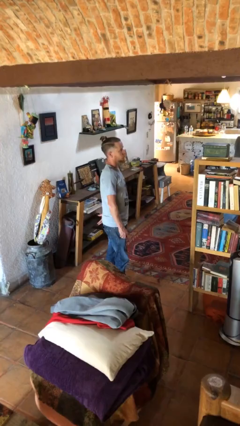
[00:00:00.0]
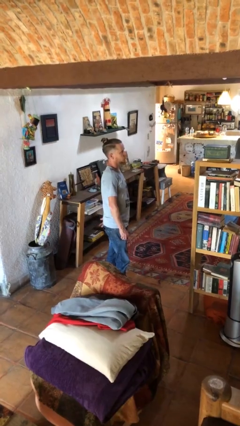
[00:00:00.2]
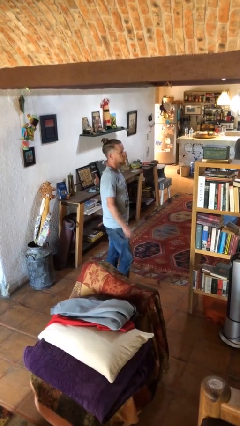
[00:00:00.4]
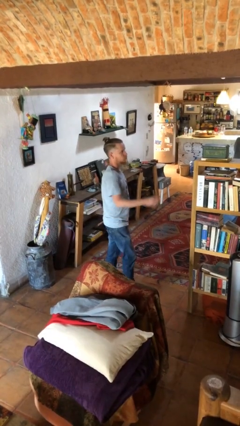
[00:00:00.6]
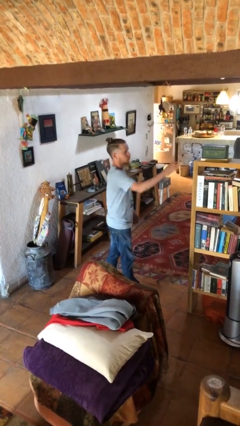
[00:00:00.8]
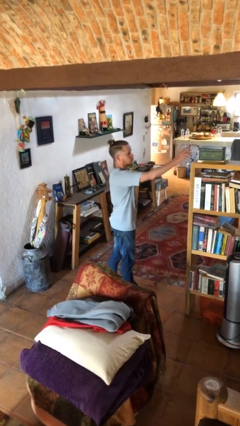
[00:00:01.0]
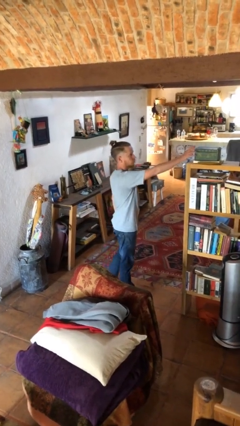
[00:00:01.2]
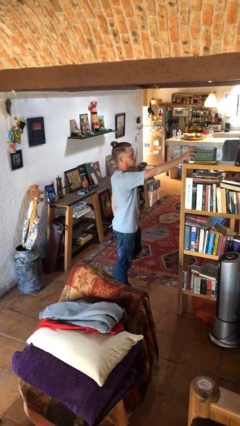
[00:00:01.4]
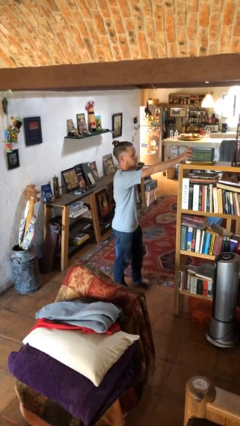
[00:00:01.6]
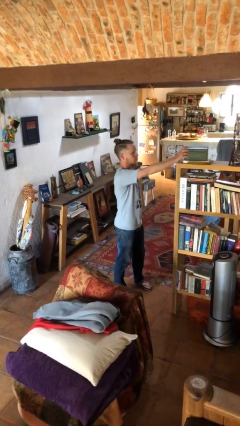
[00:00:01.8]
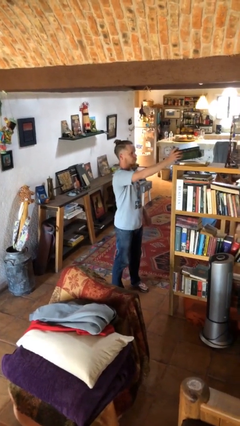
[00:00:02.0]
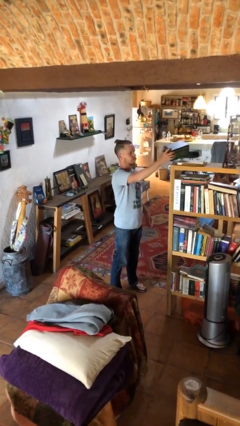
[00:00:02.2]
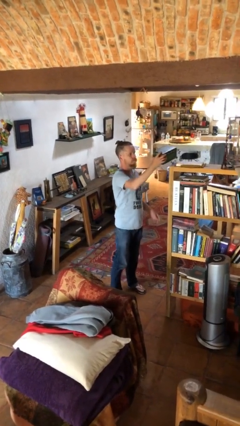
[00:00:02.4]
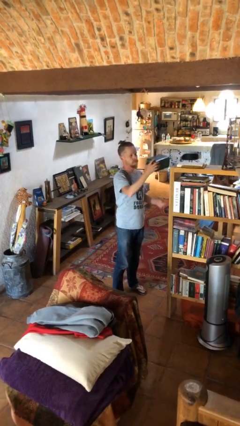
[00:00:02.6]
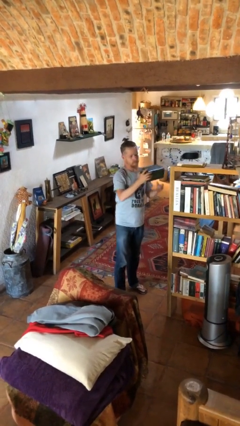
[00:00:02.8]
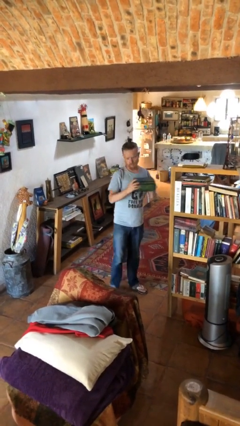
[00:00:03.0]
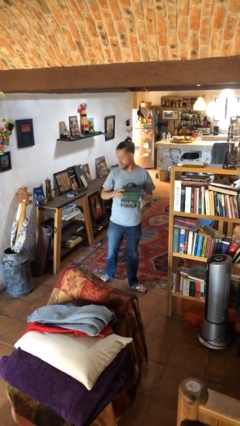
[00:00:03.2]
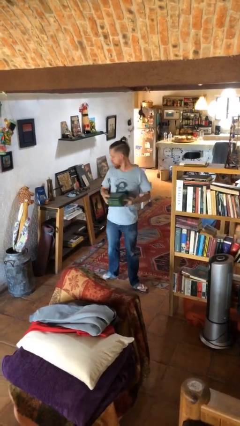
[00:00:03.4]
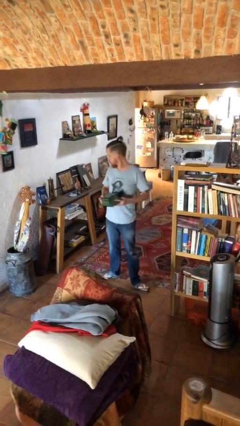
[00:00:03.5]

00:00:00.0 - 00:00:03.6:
person picks up object from shelf

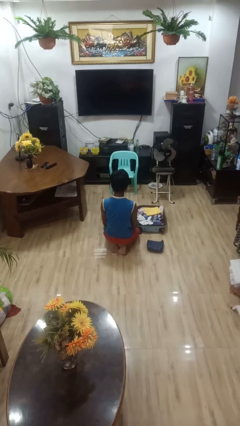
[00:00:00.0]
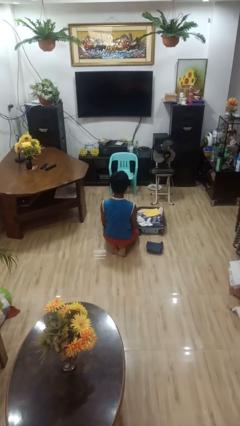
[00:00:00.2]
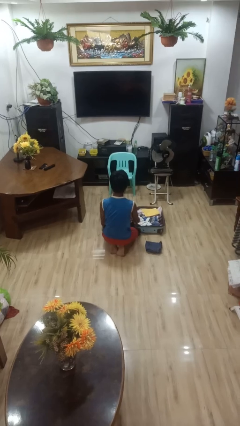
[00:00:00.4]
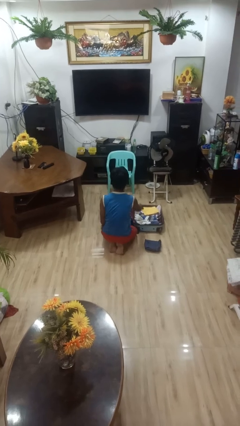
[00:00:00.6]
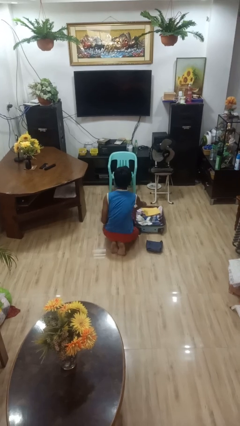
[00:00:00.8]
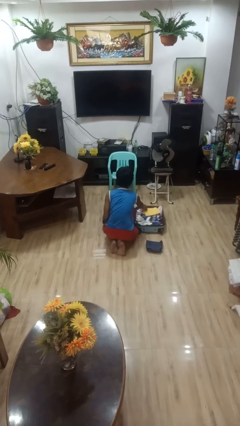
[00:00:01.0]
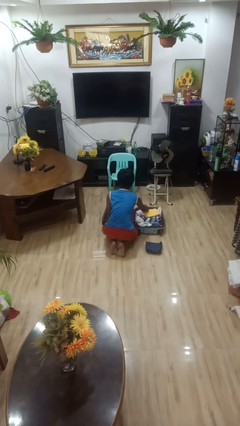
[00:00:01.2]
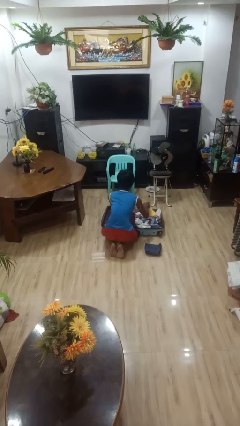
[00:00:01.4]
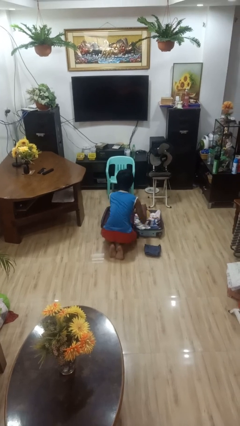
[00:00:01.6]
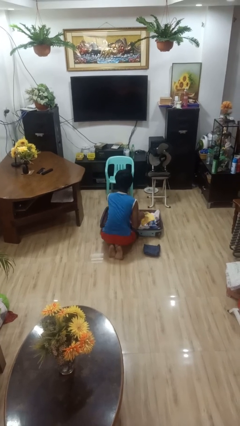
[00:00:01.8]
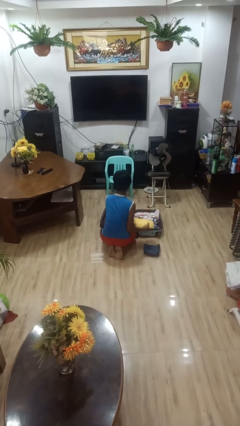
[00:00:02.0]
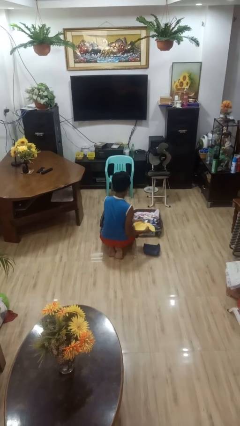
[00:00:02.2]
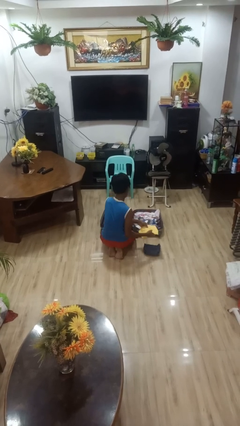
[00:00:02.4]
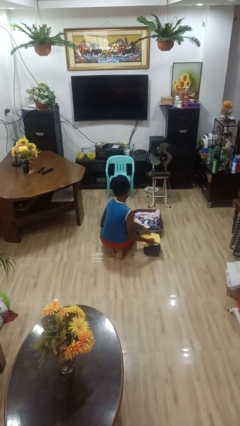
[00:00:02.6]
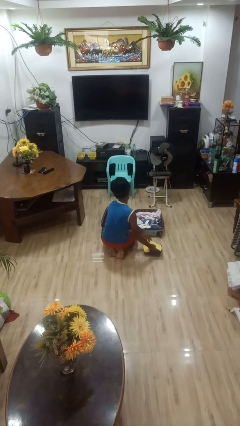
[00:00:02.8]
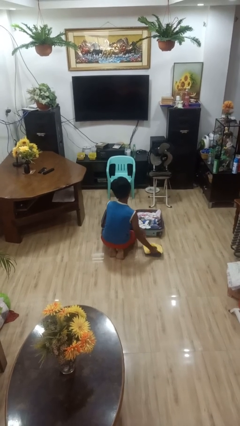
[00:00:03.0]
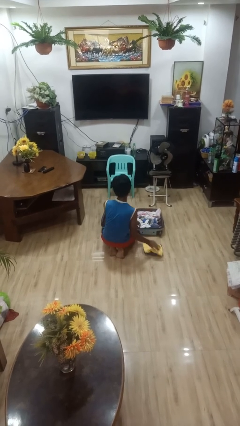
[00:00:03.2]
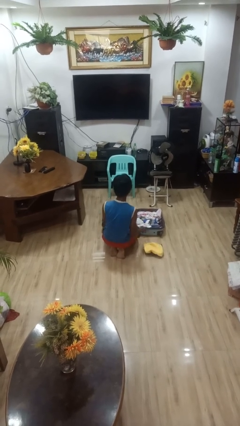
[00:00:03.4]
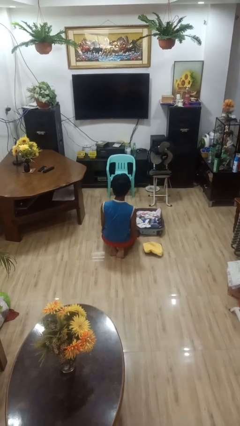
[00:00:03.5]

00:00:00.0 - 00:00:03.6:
person unloads clothes from suitcase

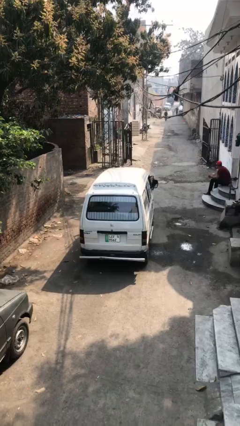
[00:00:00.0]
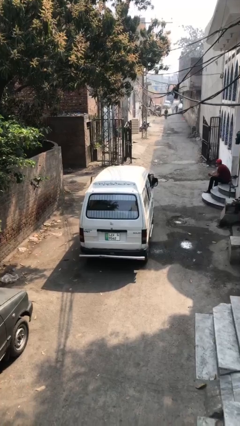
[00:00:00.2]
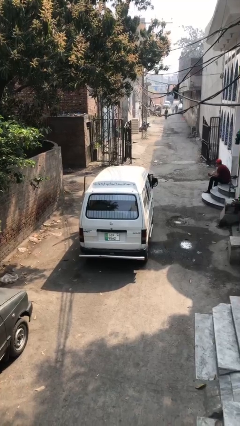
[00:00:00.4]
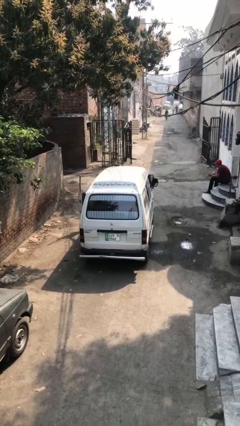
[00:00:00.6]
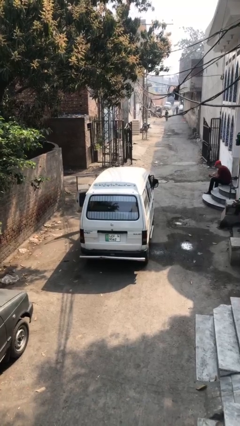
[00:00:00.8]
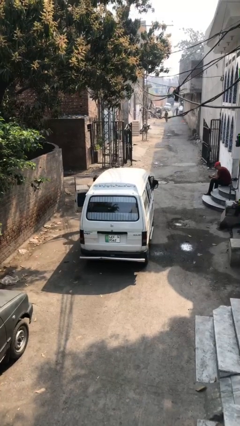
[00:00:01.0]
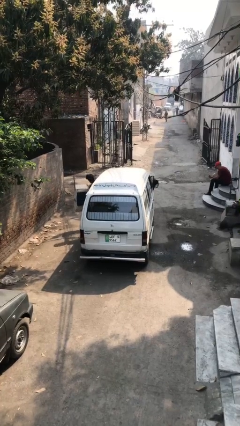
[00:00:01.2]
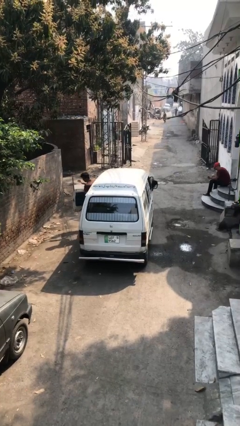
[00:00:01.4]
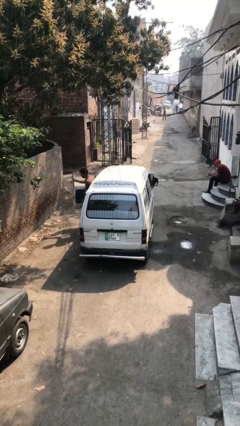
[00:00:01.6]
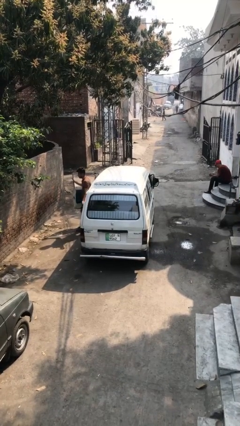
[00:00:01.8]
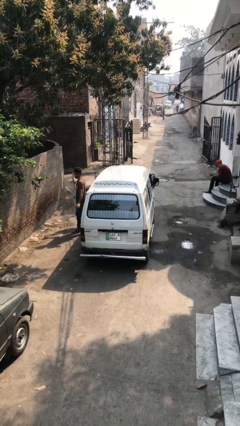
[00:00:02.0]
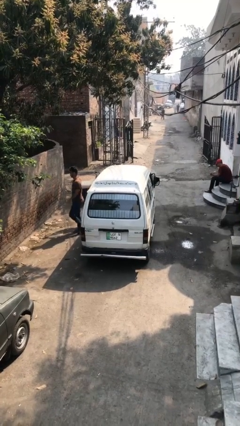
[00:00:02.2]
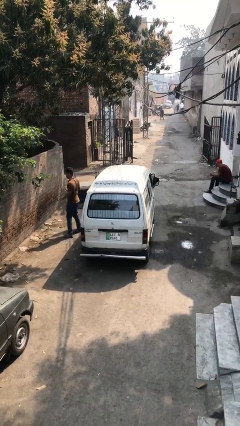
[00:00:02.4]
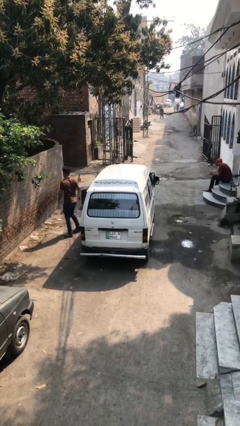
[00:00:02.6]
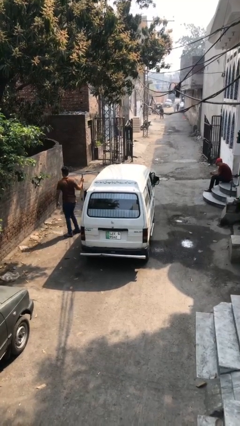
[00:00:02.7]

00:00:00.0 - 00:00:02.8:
car drops off person

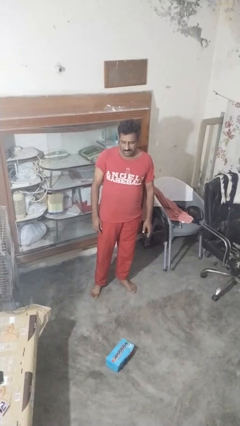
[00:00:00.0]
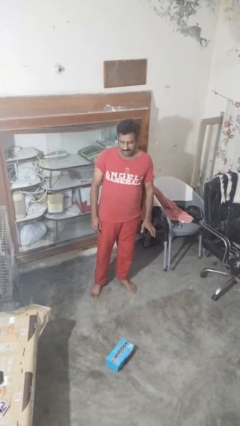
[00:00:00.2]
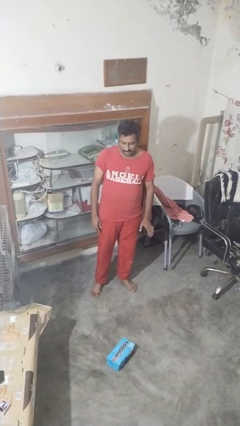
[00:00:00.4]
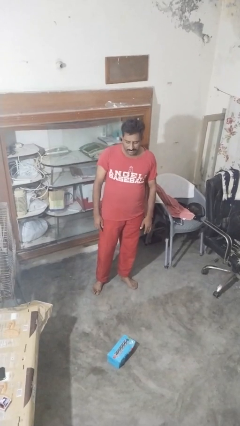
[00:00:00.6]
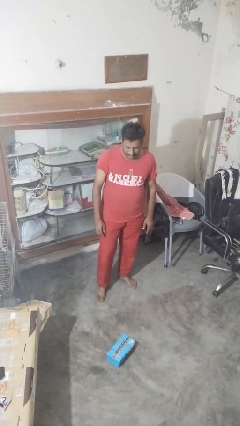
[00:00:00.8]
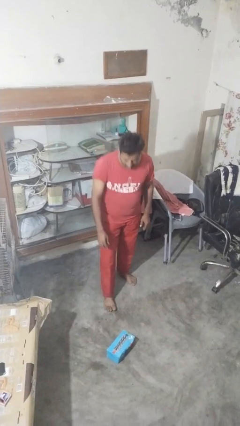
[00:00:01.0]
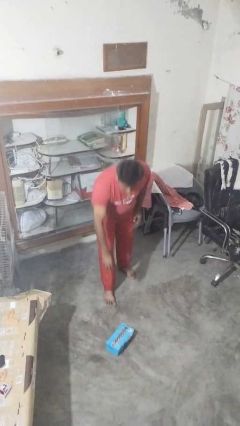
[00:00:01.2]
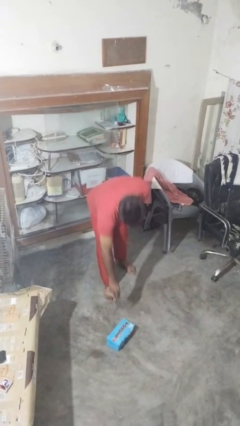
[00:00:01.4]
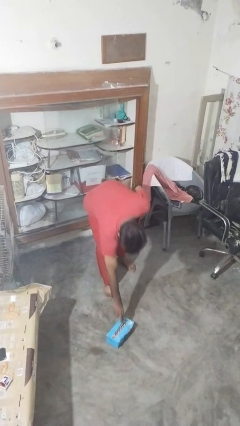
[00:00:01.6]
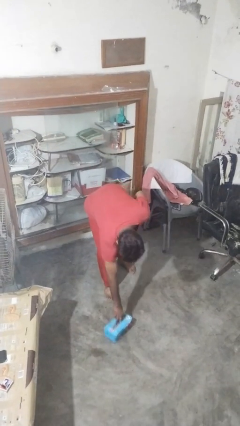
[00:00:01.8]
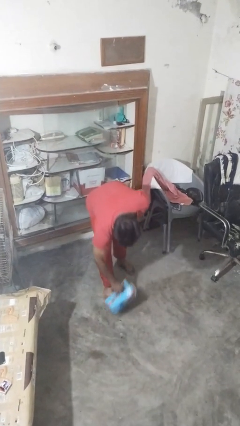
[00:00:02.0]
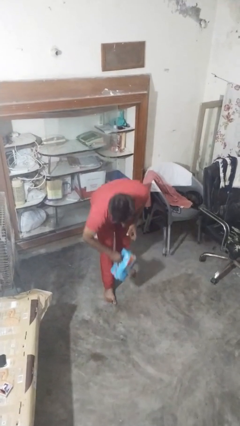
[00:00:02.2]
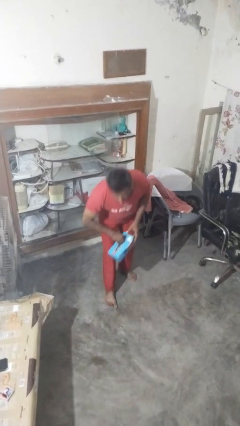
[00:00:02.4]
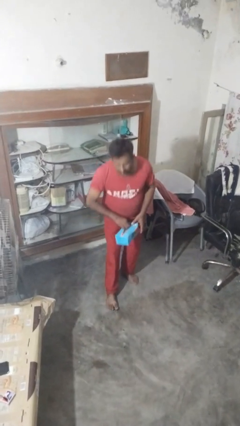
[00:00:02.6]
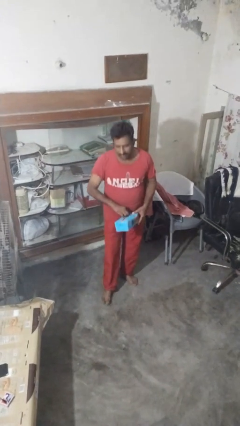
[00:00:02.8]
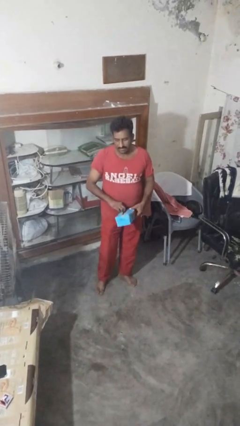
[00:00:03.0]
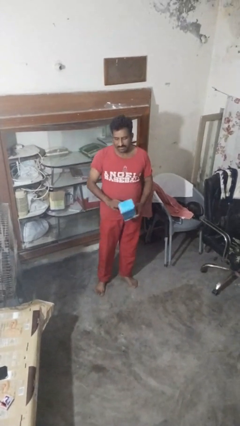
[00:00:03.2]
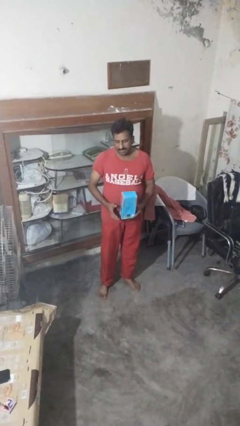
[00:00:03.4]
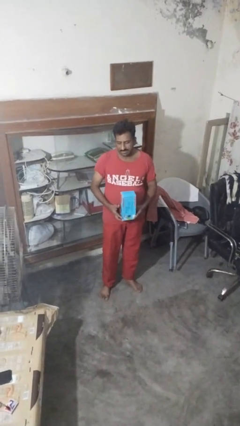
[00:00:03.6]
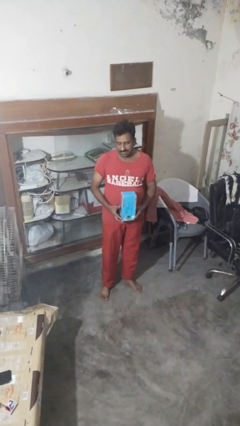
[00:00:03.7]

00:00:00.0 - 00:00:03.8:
person picks up object from floor

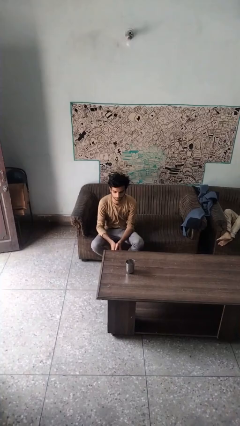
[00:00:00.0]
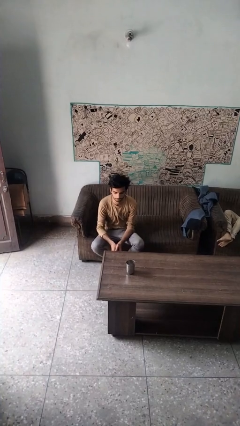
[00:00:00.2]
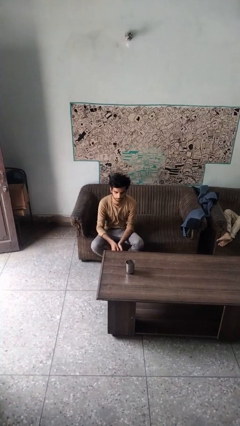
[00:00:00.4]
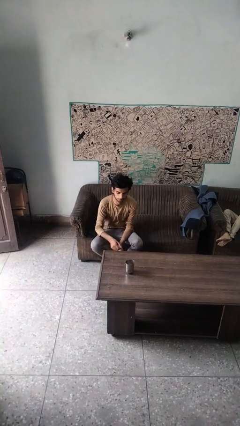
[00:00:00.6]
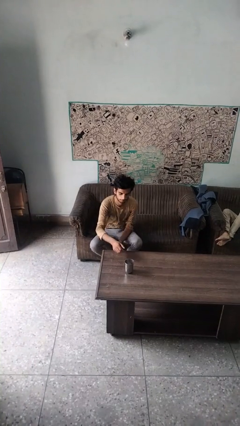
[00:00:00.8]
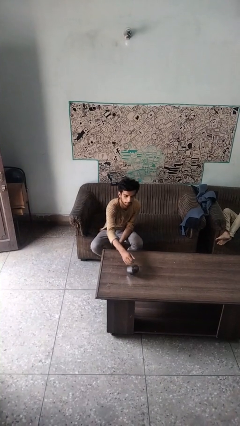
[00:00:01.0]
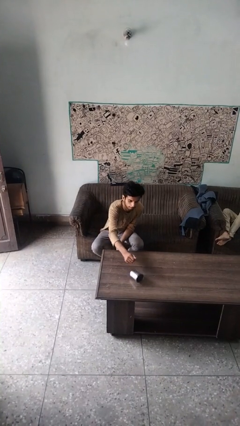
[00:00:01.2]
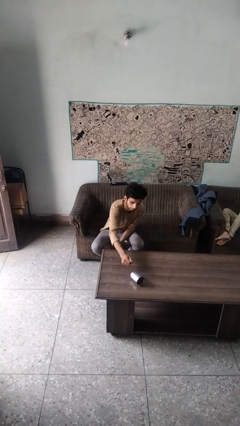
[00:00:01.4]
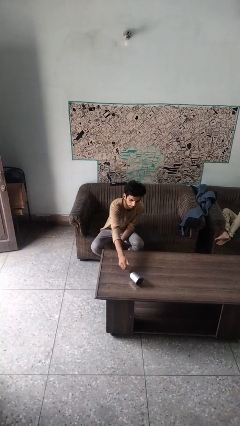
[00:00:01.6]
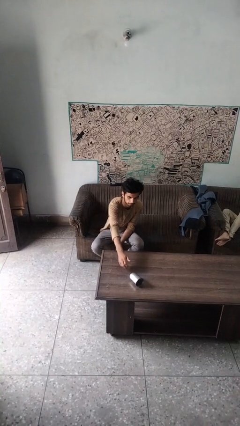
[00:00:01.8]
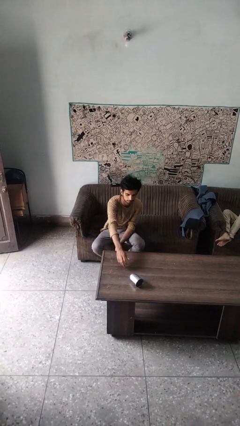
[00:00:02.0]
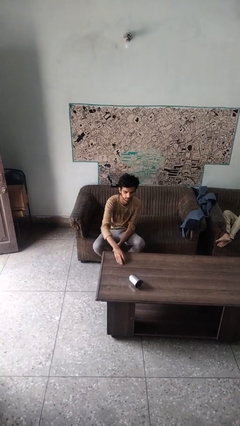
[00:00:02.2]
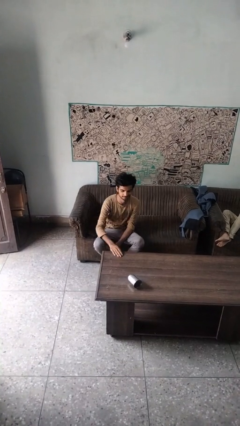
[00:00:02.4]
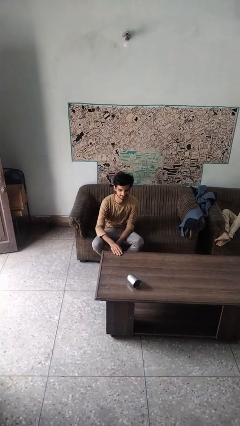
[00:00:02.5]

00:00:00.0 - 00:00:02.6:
person knocks over glass

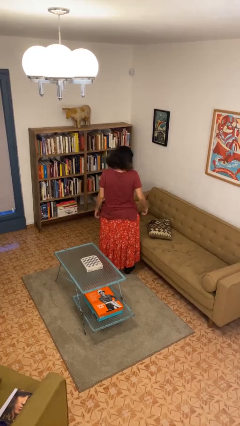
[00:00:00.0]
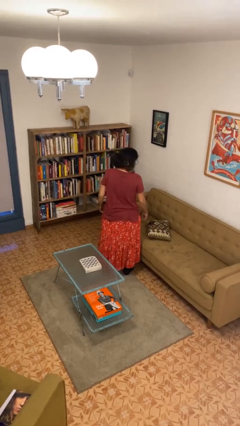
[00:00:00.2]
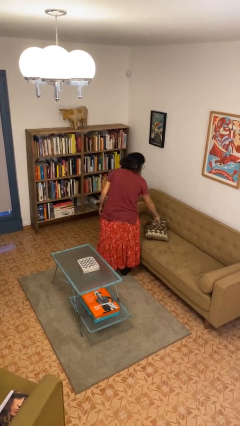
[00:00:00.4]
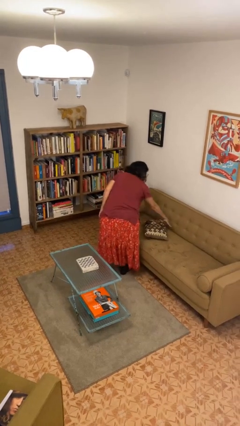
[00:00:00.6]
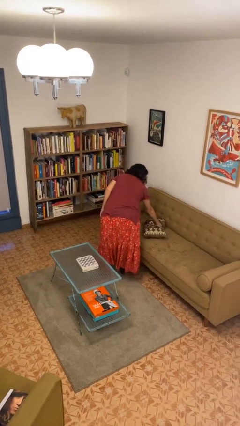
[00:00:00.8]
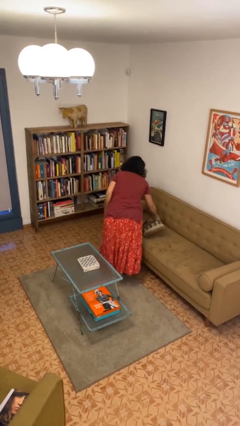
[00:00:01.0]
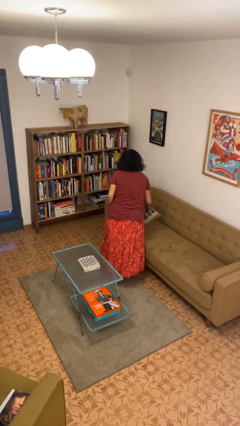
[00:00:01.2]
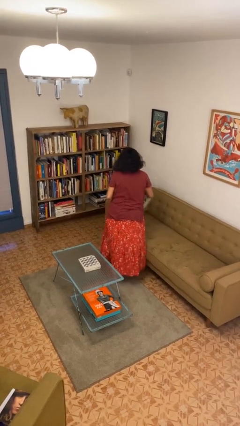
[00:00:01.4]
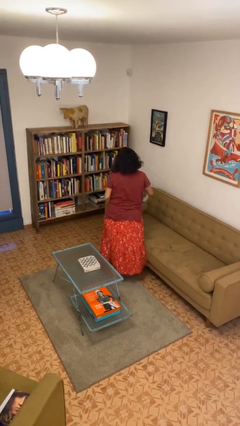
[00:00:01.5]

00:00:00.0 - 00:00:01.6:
person picks up object from couch
